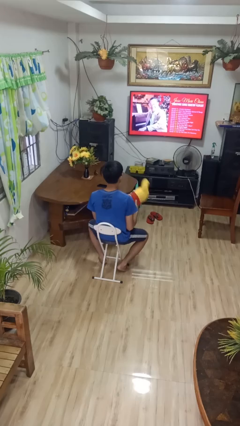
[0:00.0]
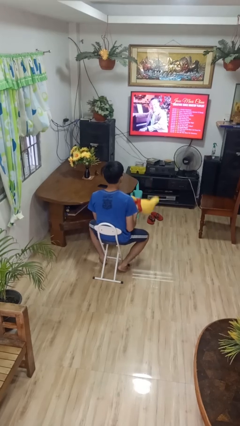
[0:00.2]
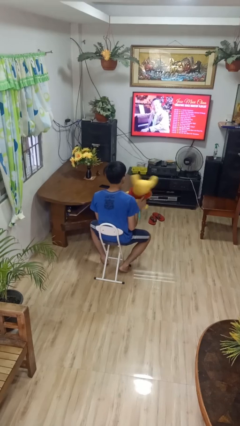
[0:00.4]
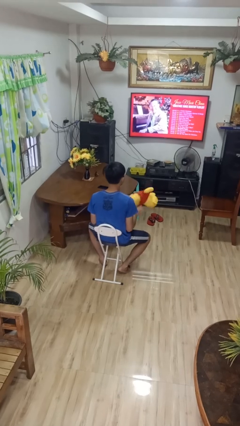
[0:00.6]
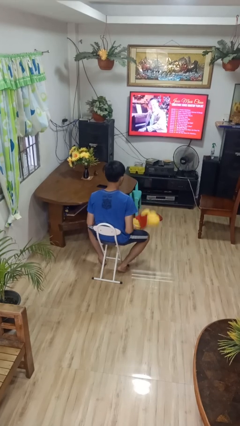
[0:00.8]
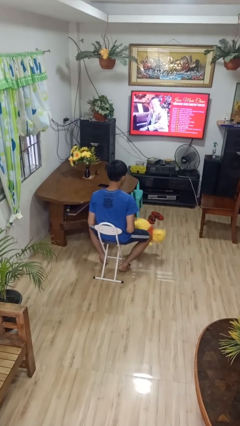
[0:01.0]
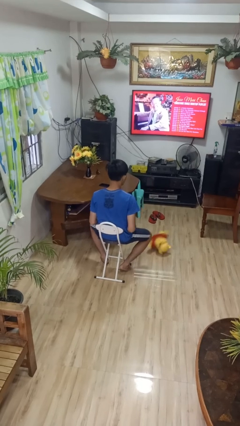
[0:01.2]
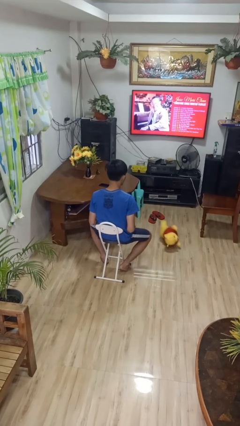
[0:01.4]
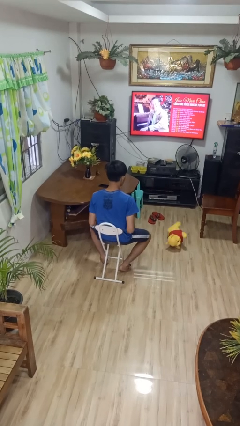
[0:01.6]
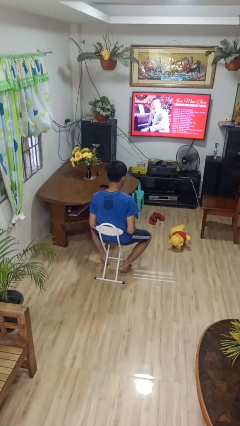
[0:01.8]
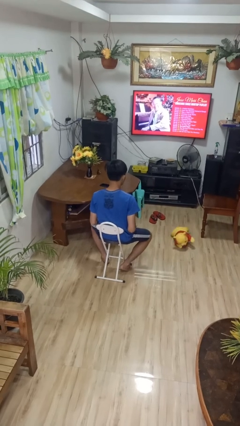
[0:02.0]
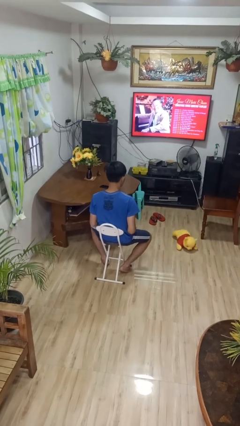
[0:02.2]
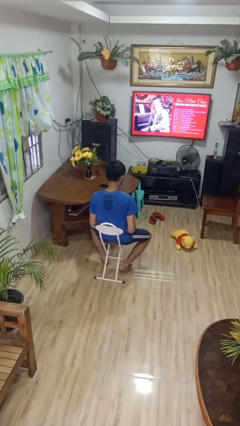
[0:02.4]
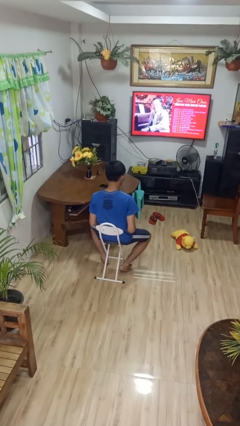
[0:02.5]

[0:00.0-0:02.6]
person drops object

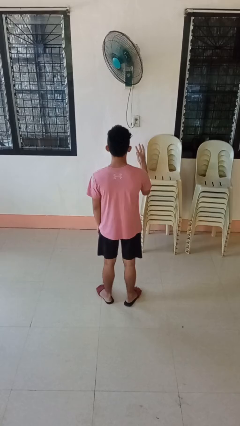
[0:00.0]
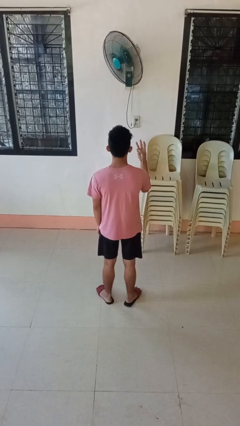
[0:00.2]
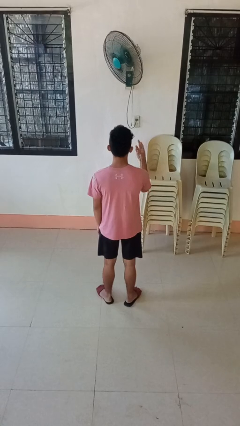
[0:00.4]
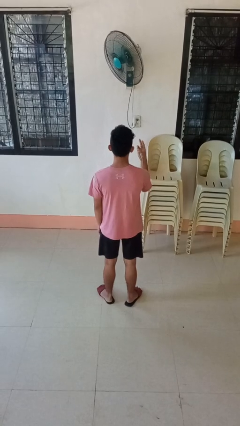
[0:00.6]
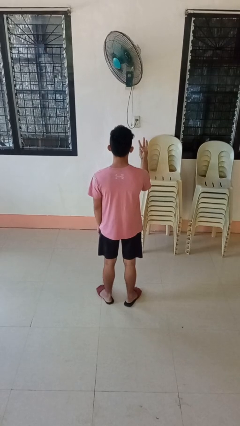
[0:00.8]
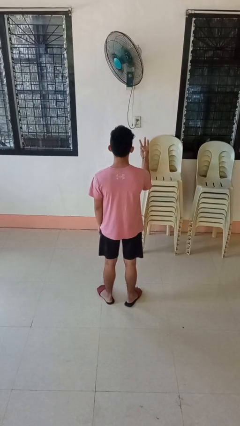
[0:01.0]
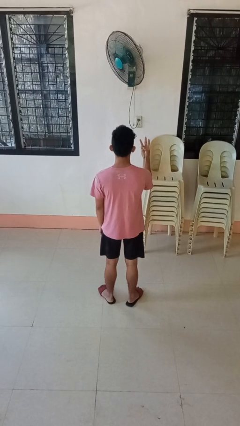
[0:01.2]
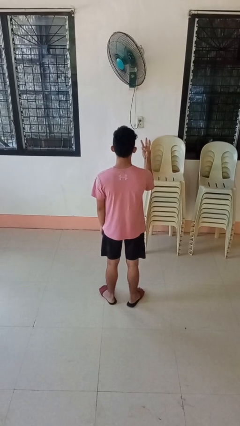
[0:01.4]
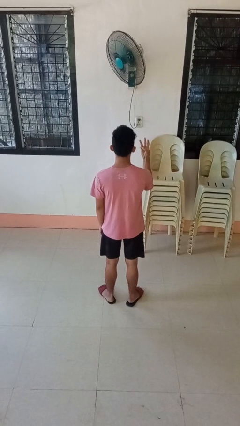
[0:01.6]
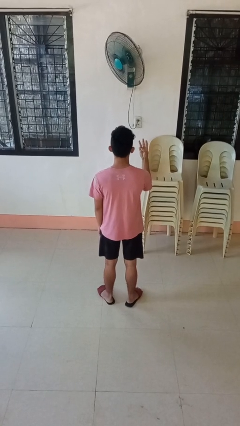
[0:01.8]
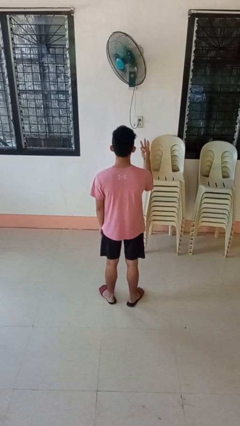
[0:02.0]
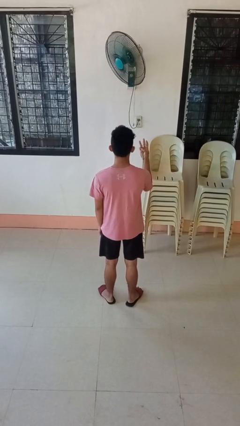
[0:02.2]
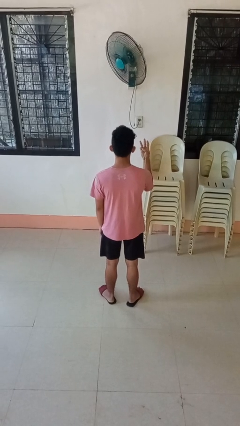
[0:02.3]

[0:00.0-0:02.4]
person gestures number three

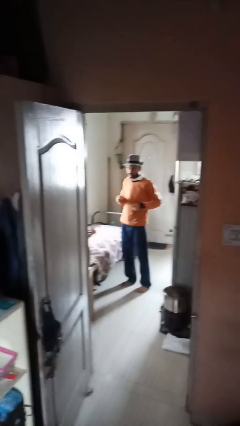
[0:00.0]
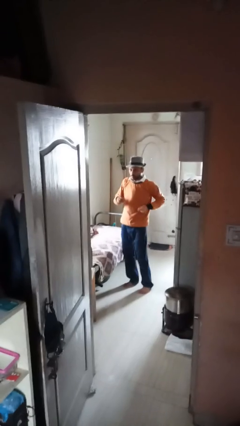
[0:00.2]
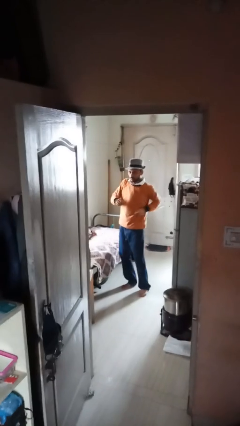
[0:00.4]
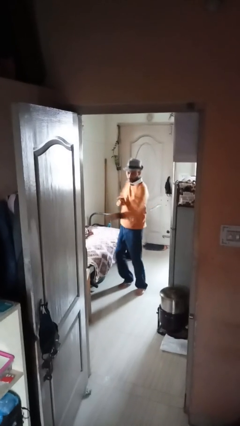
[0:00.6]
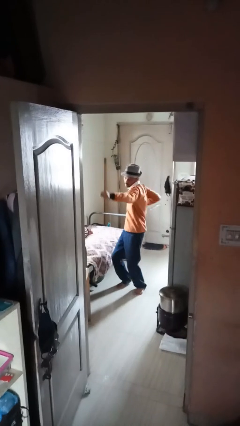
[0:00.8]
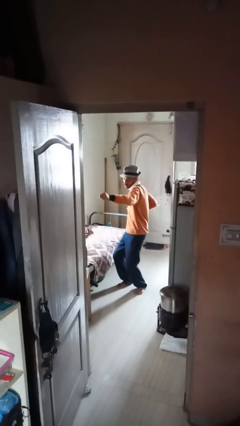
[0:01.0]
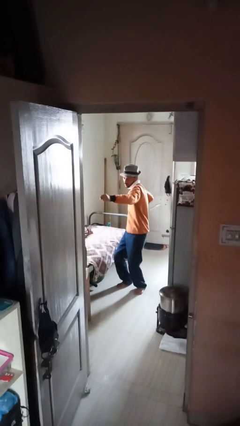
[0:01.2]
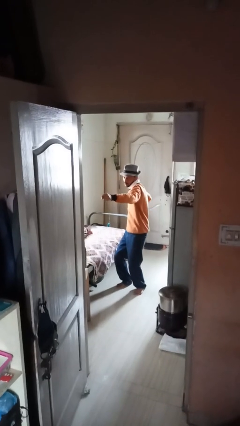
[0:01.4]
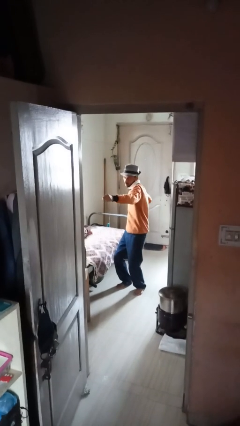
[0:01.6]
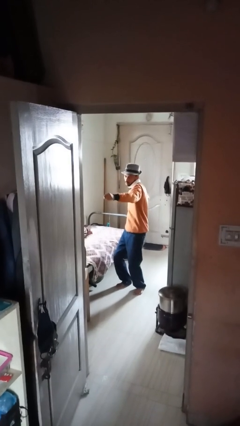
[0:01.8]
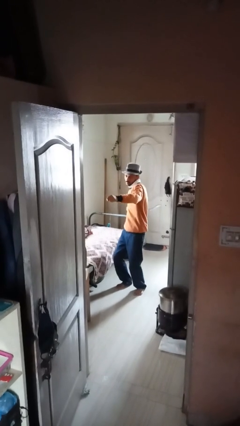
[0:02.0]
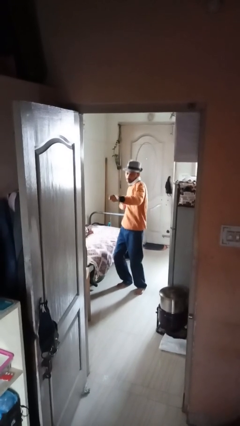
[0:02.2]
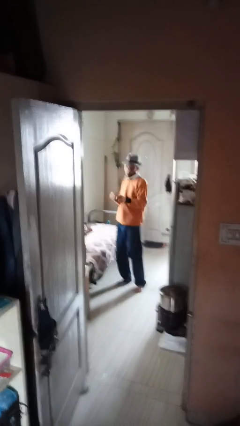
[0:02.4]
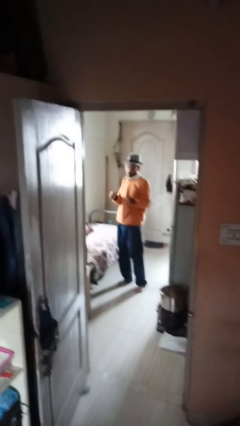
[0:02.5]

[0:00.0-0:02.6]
person punches

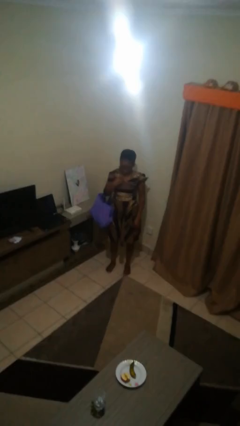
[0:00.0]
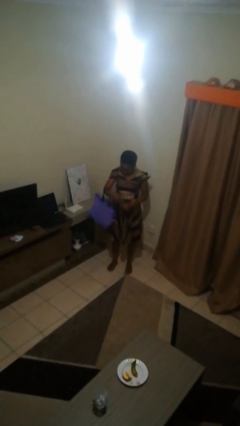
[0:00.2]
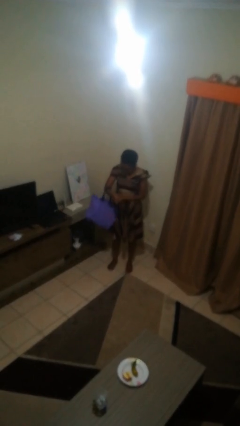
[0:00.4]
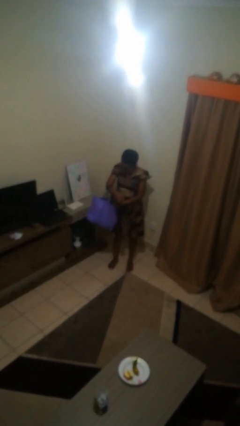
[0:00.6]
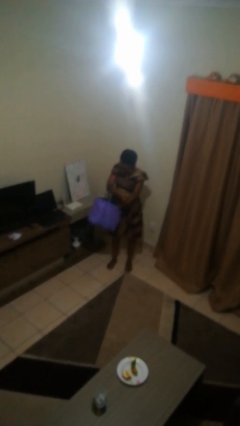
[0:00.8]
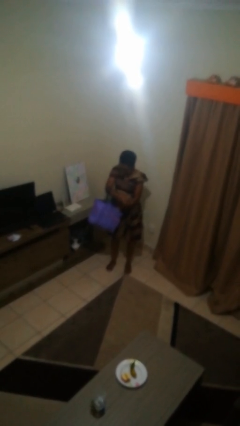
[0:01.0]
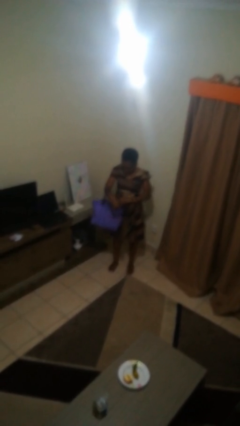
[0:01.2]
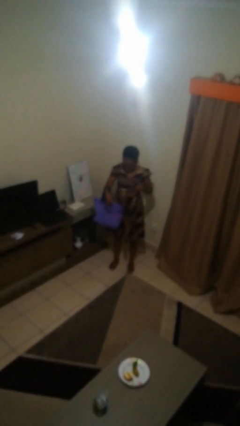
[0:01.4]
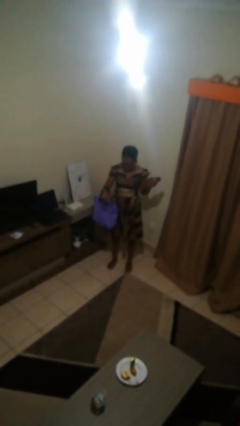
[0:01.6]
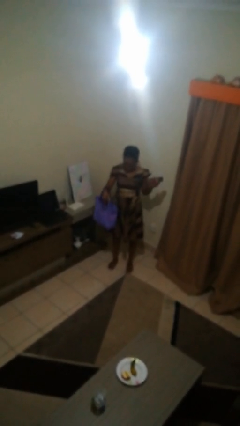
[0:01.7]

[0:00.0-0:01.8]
person takes object from bag

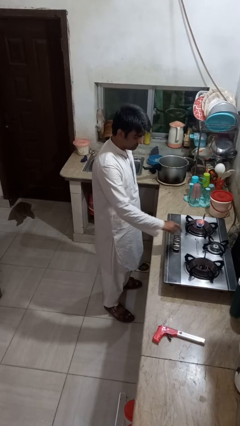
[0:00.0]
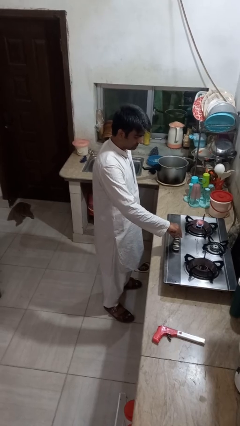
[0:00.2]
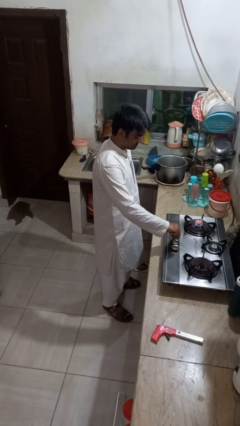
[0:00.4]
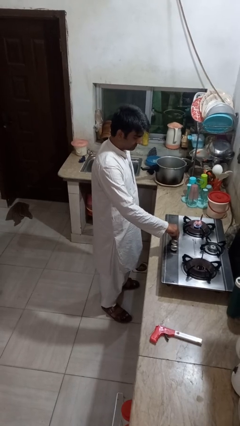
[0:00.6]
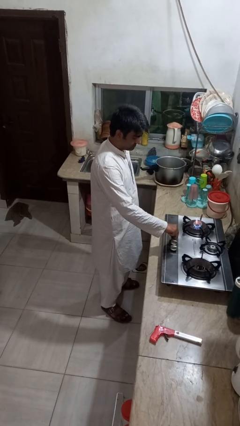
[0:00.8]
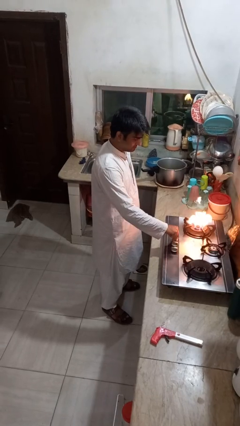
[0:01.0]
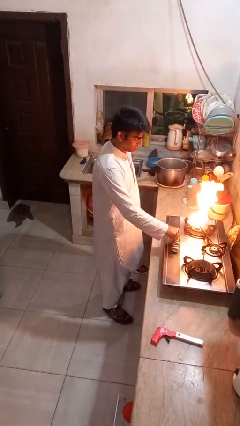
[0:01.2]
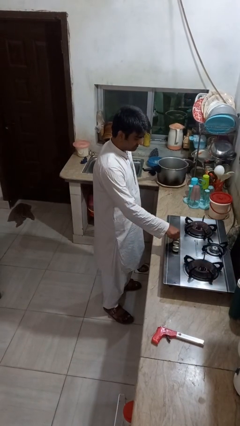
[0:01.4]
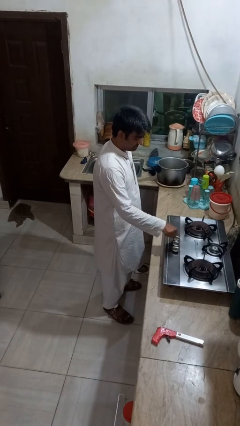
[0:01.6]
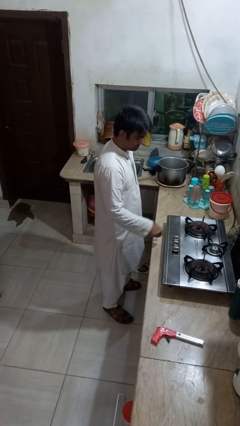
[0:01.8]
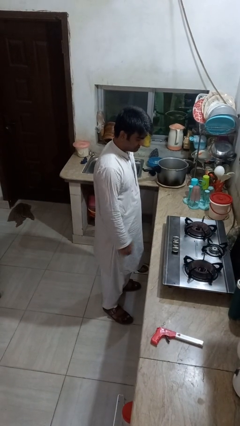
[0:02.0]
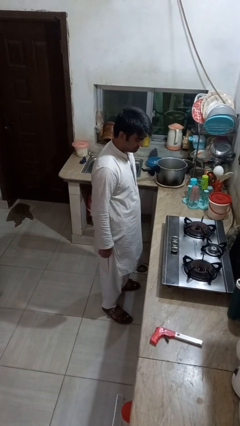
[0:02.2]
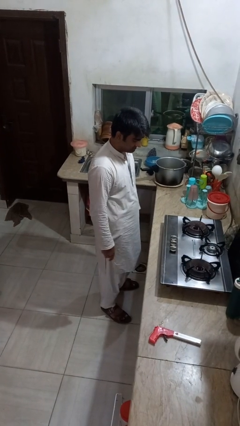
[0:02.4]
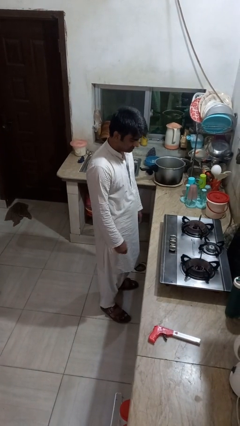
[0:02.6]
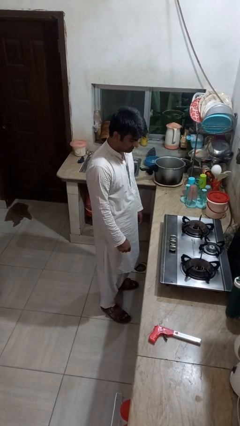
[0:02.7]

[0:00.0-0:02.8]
person turns off stovetop

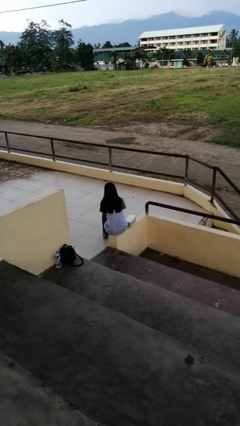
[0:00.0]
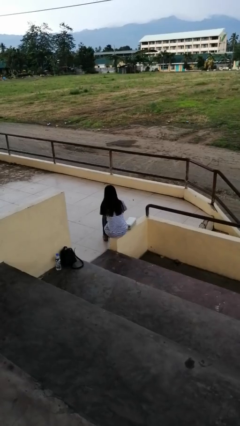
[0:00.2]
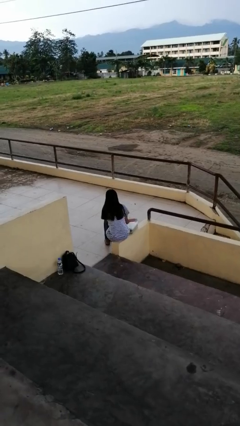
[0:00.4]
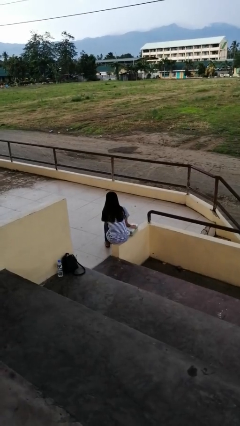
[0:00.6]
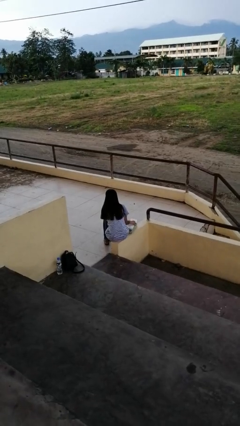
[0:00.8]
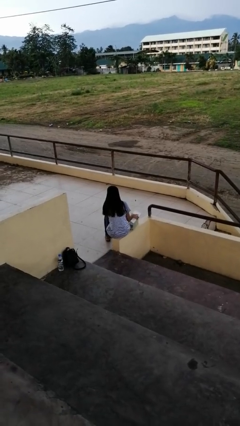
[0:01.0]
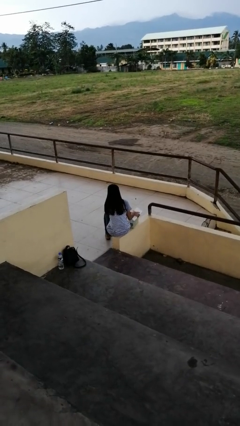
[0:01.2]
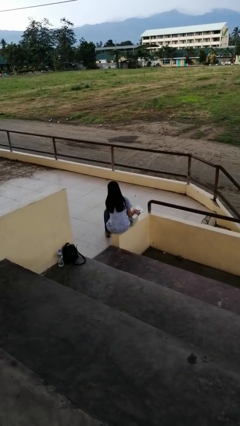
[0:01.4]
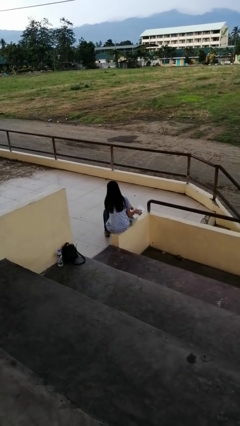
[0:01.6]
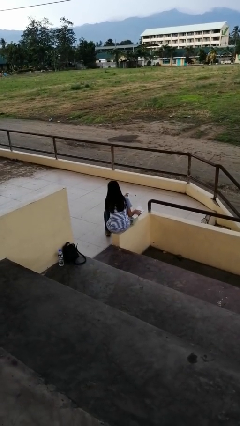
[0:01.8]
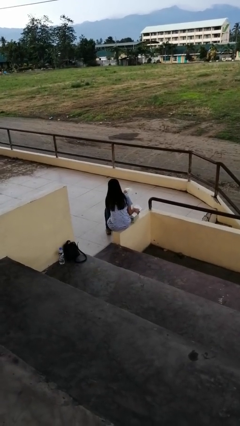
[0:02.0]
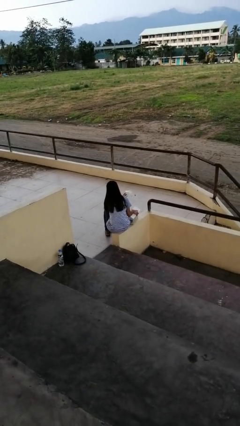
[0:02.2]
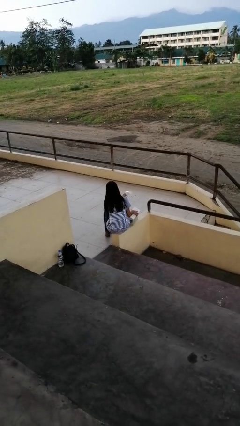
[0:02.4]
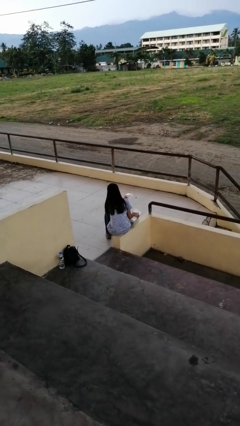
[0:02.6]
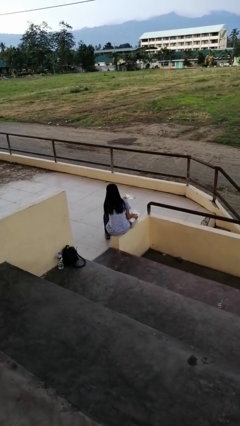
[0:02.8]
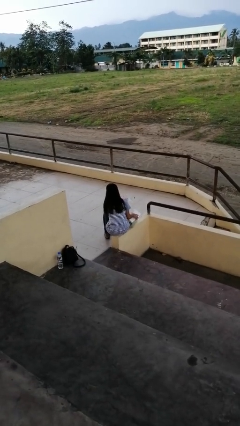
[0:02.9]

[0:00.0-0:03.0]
person takes object from box

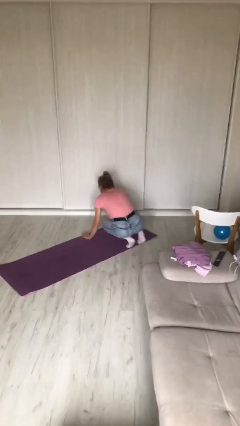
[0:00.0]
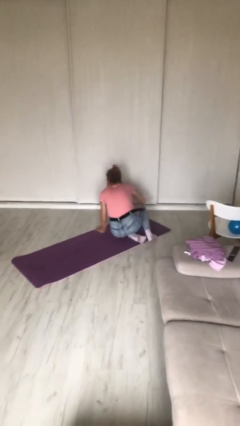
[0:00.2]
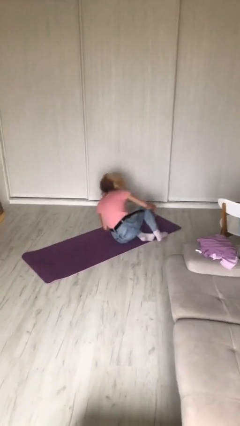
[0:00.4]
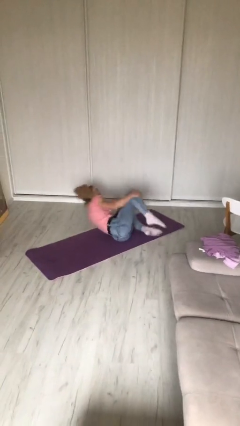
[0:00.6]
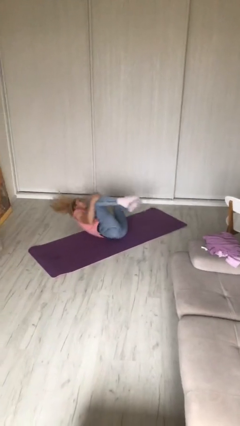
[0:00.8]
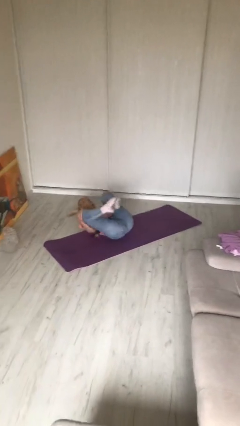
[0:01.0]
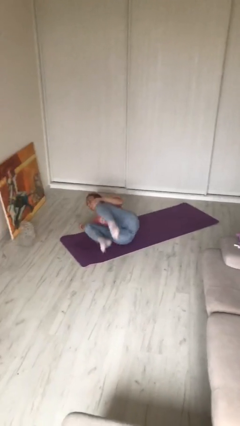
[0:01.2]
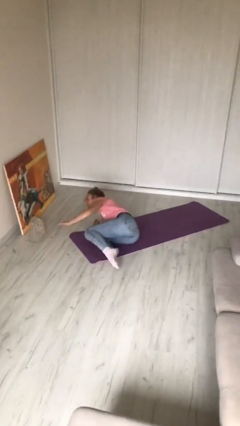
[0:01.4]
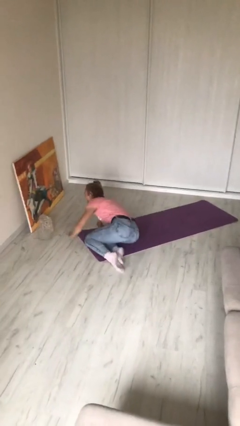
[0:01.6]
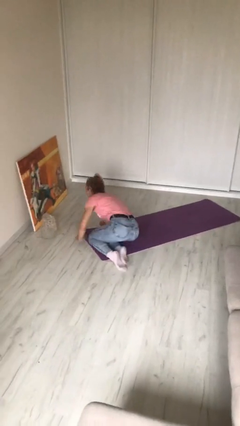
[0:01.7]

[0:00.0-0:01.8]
person somersaults
